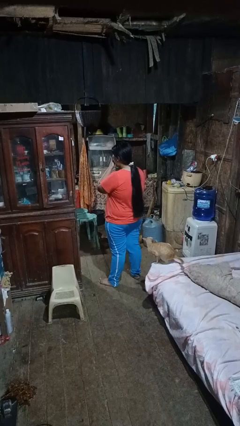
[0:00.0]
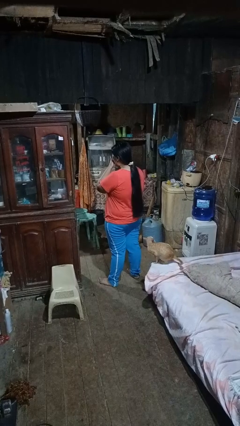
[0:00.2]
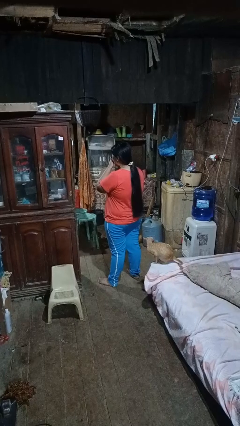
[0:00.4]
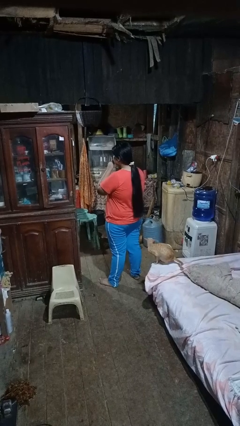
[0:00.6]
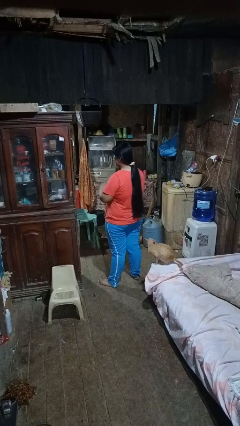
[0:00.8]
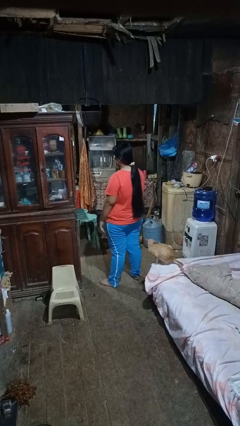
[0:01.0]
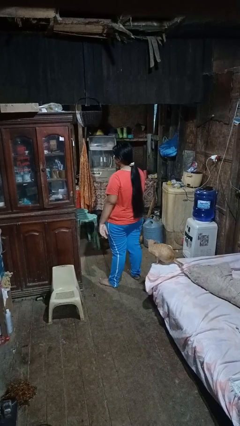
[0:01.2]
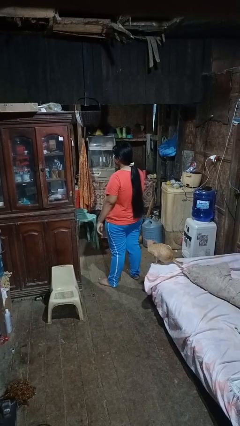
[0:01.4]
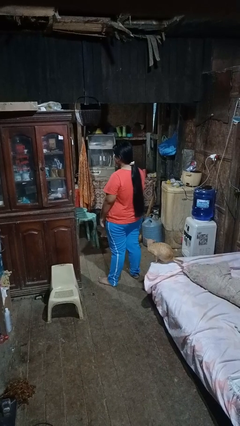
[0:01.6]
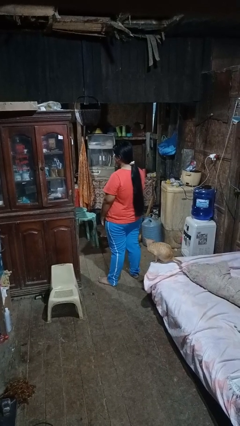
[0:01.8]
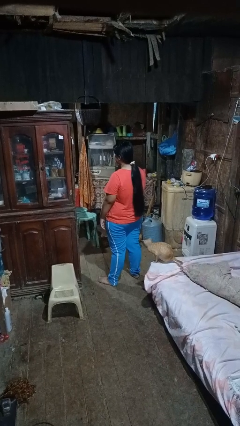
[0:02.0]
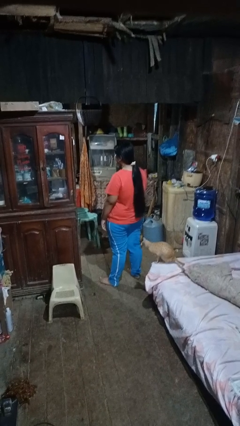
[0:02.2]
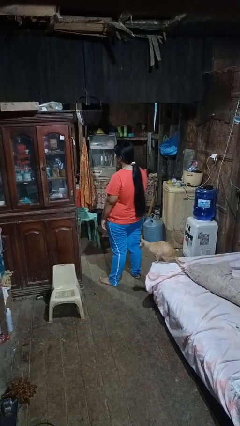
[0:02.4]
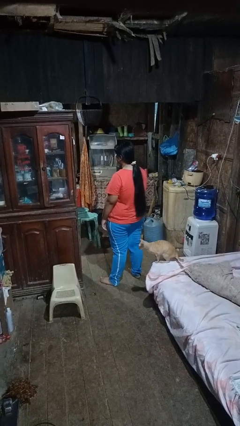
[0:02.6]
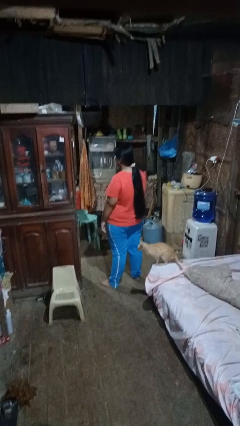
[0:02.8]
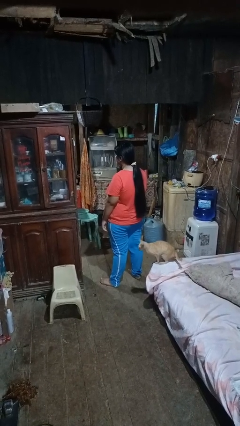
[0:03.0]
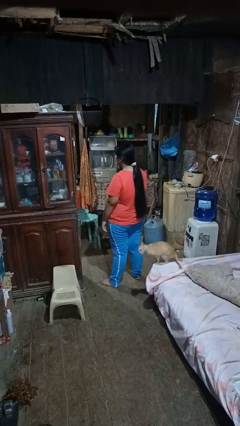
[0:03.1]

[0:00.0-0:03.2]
person yawns

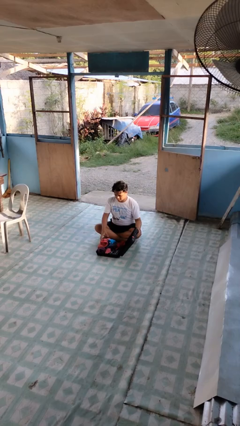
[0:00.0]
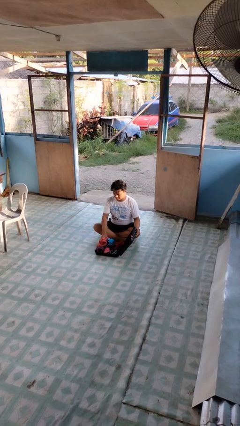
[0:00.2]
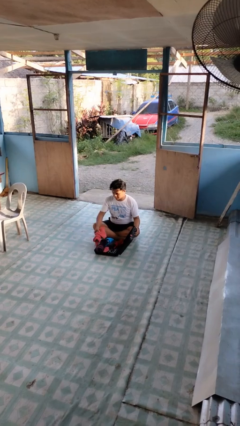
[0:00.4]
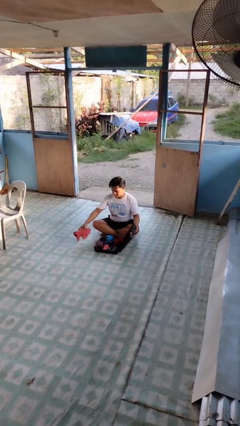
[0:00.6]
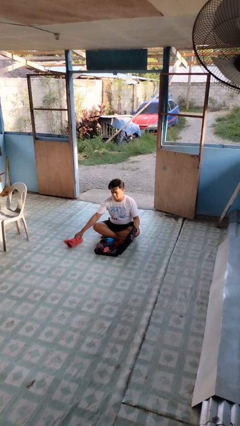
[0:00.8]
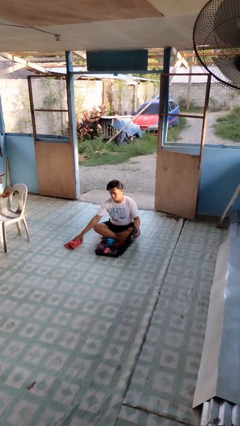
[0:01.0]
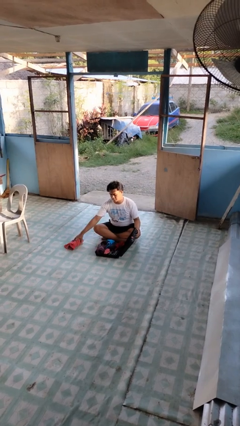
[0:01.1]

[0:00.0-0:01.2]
person unloads clothes from suitcase

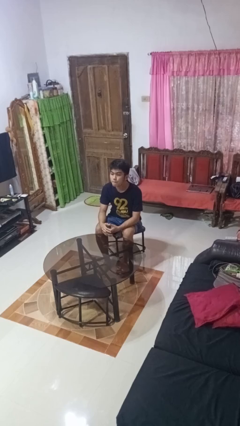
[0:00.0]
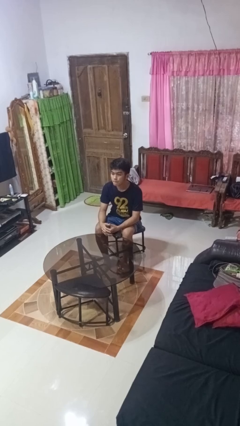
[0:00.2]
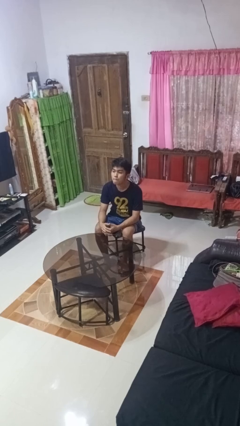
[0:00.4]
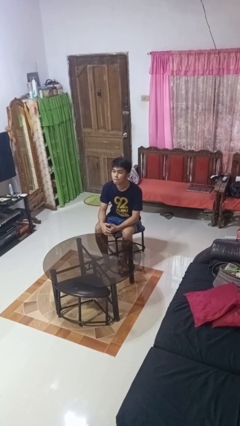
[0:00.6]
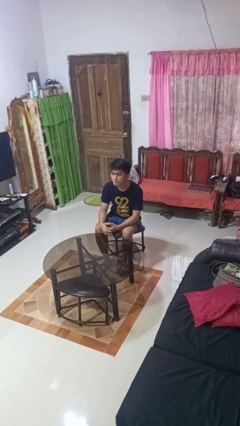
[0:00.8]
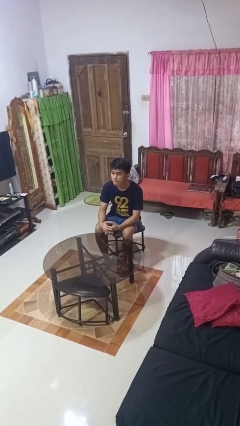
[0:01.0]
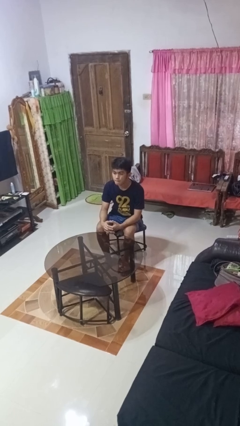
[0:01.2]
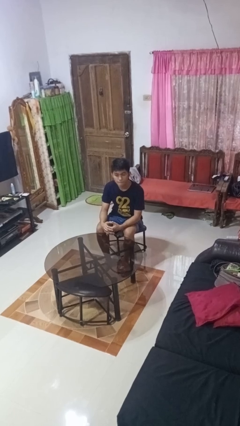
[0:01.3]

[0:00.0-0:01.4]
person nods head

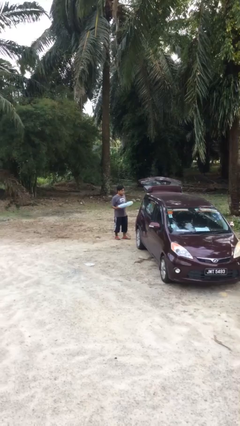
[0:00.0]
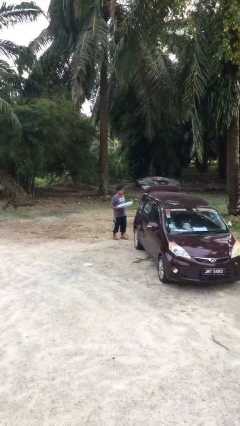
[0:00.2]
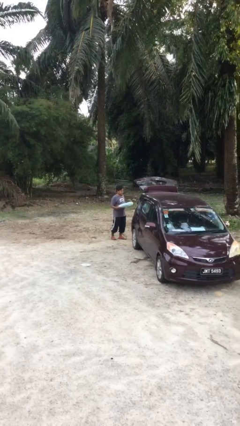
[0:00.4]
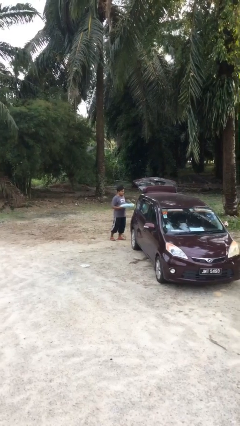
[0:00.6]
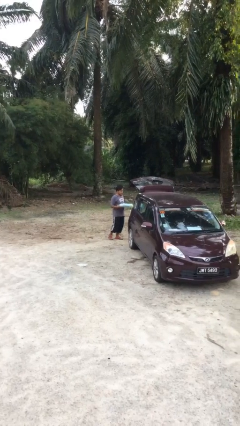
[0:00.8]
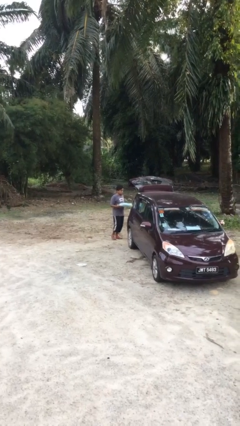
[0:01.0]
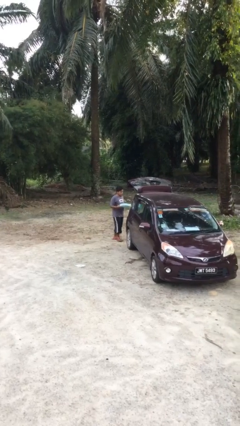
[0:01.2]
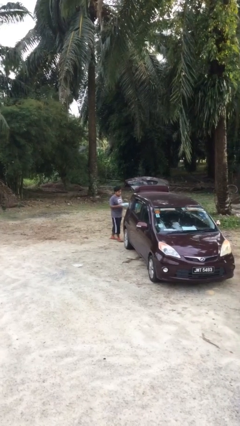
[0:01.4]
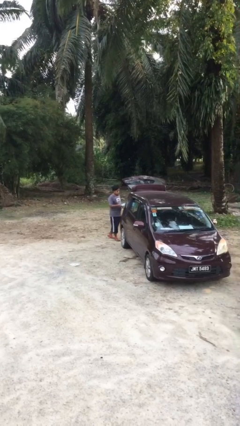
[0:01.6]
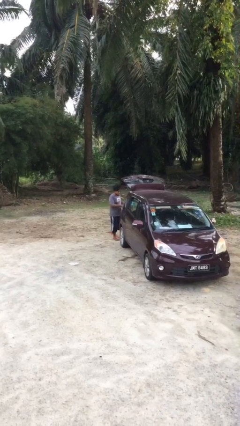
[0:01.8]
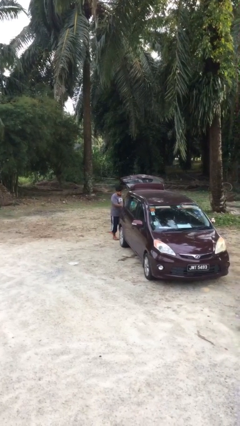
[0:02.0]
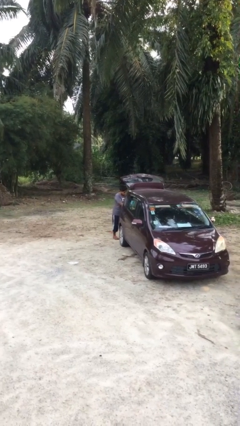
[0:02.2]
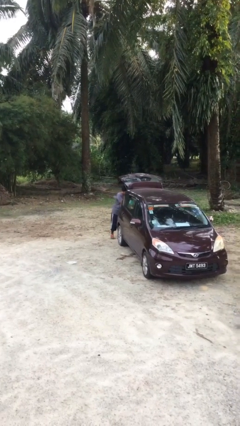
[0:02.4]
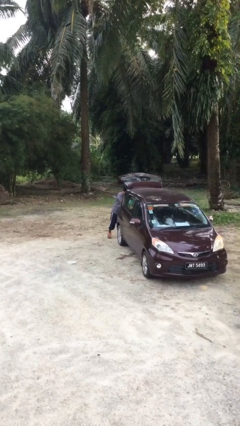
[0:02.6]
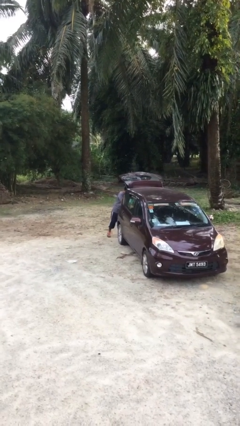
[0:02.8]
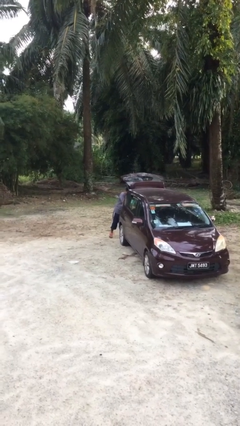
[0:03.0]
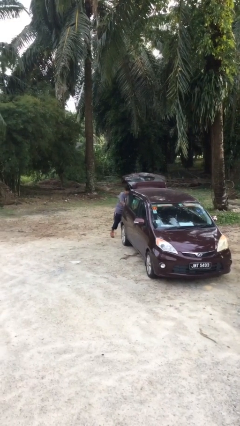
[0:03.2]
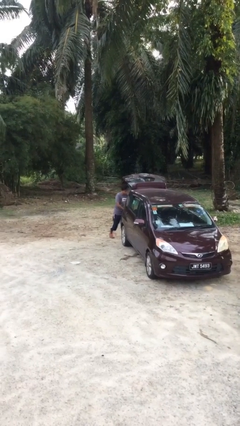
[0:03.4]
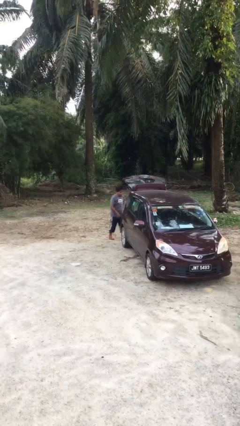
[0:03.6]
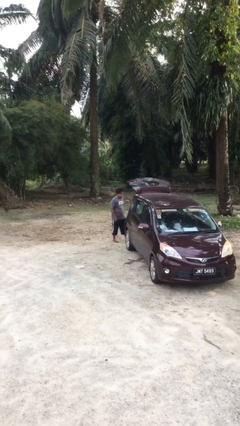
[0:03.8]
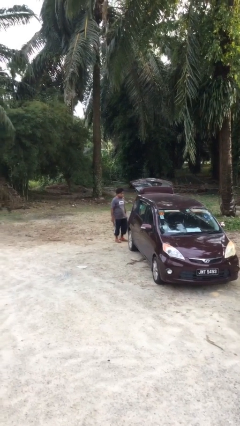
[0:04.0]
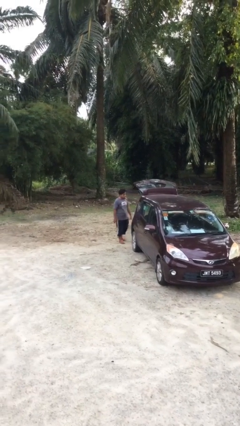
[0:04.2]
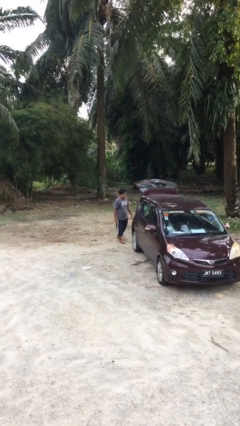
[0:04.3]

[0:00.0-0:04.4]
person loads car

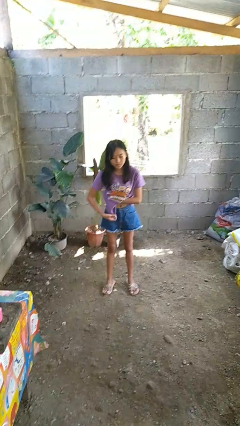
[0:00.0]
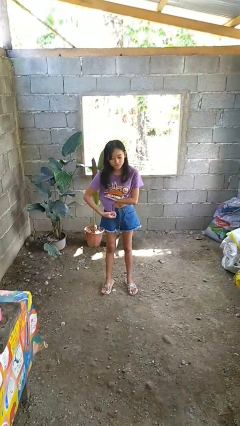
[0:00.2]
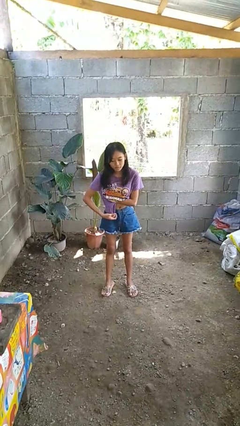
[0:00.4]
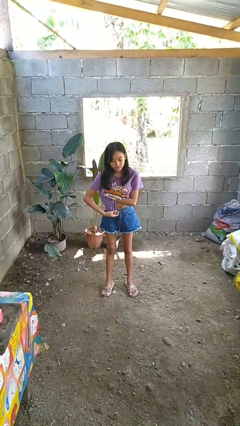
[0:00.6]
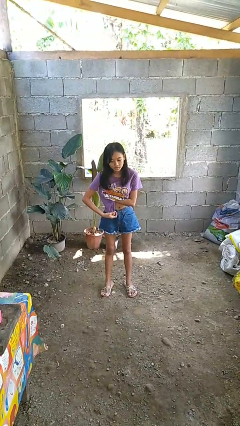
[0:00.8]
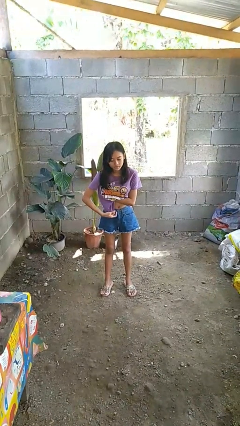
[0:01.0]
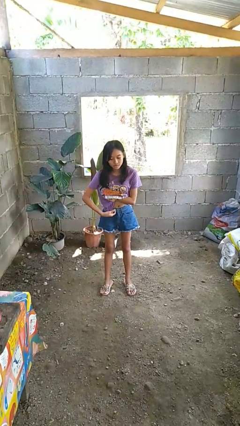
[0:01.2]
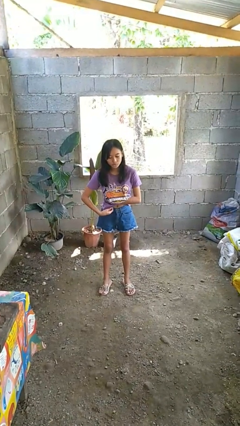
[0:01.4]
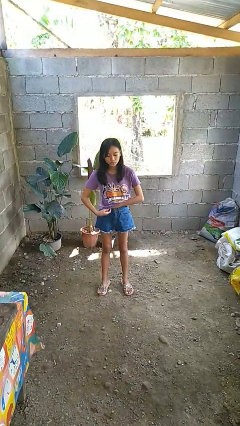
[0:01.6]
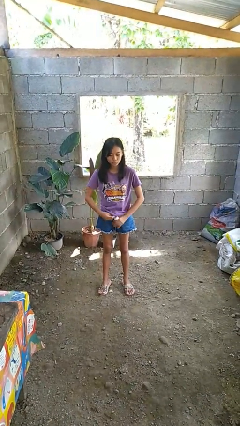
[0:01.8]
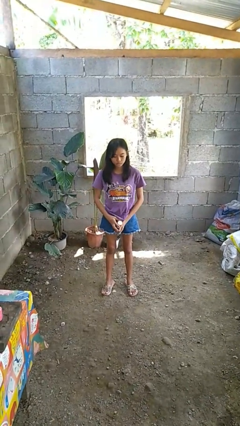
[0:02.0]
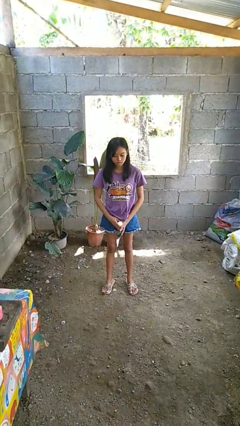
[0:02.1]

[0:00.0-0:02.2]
person applies deodorant

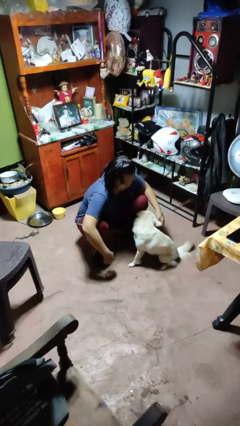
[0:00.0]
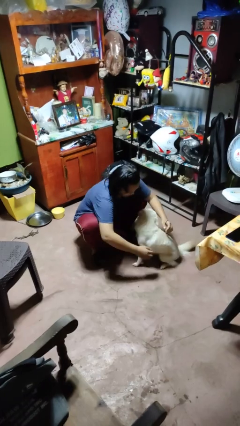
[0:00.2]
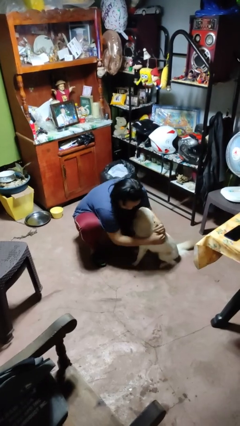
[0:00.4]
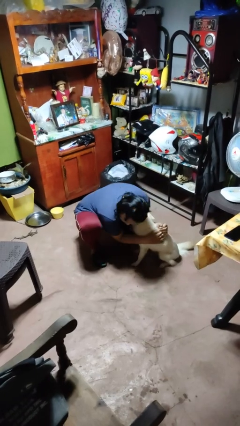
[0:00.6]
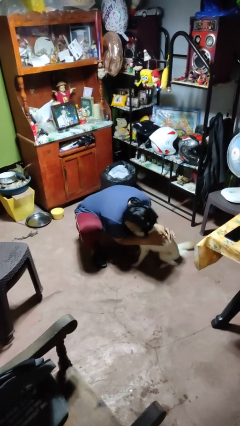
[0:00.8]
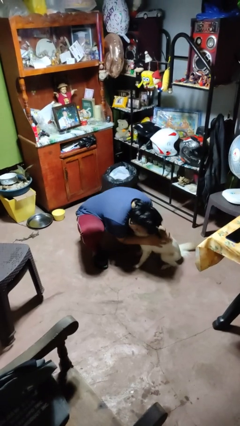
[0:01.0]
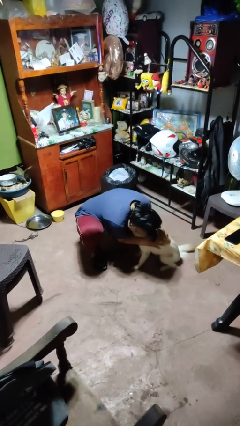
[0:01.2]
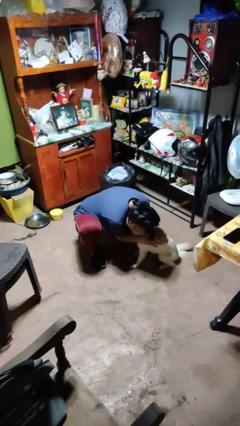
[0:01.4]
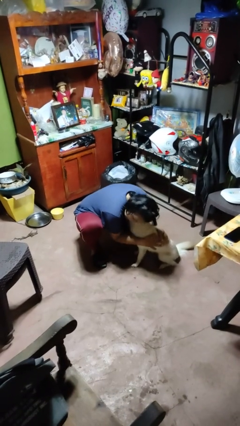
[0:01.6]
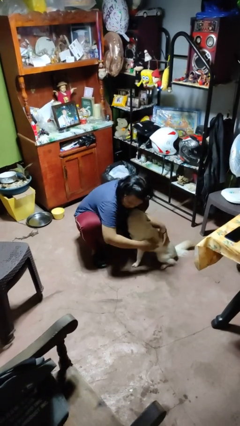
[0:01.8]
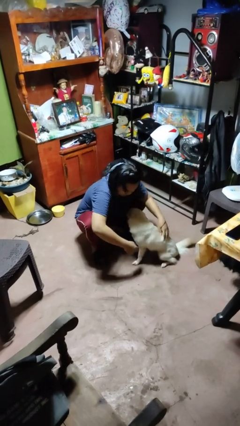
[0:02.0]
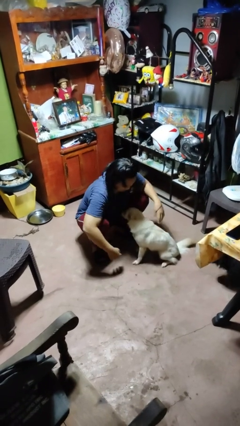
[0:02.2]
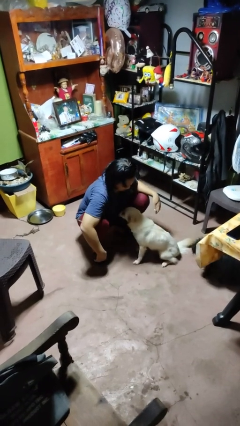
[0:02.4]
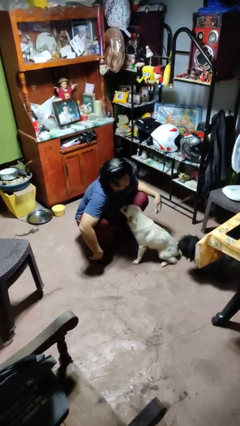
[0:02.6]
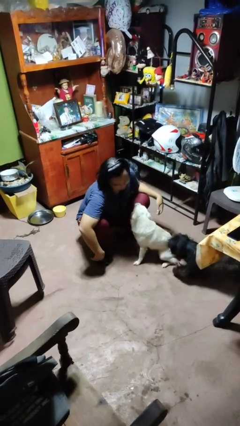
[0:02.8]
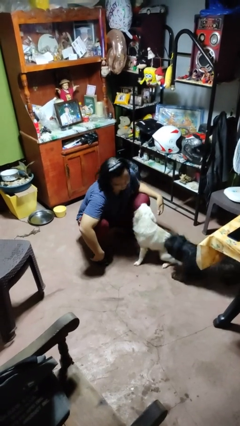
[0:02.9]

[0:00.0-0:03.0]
person hugs dog

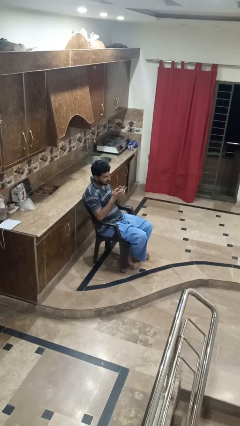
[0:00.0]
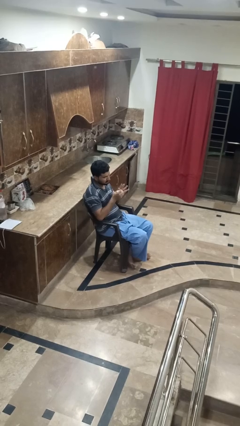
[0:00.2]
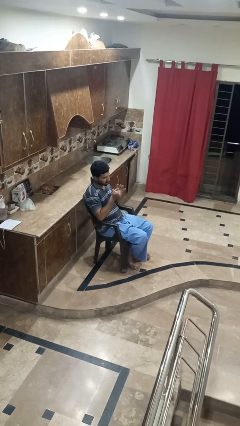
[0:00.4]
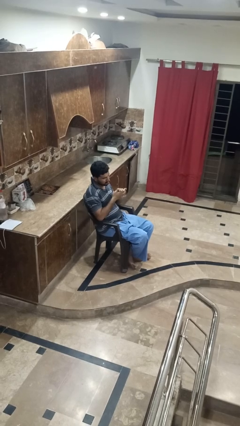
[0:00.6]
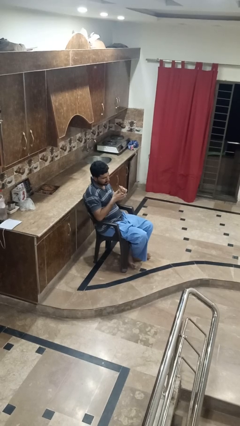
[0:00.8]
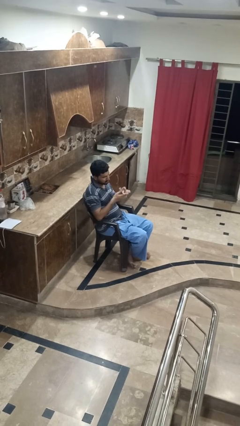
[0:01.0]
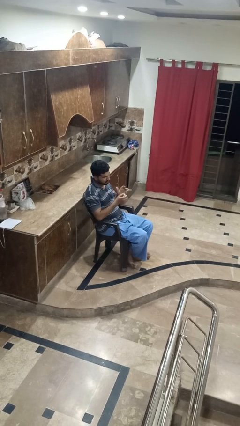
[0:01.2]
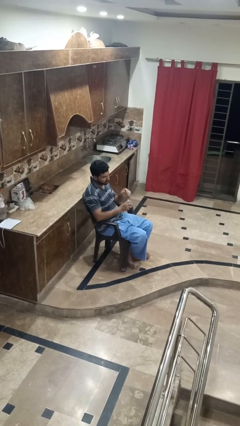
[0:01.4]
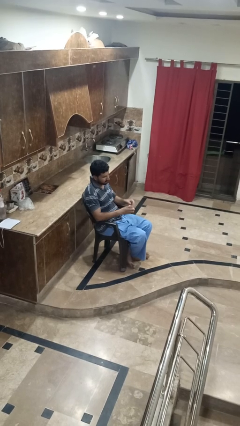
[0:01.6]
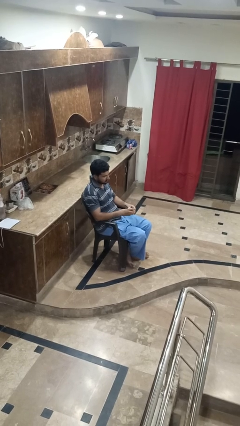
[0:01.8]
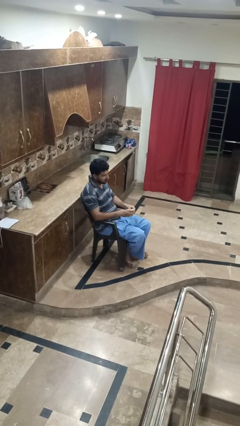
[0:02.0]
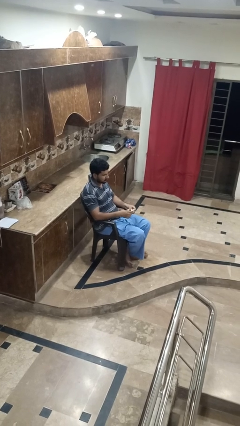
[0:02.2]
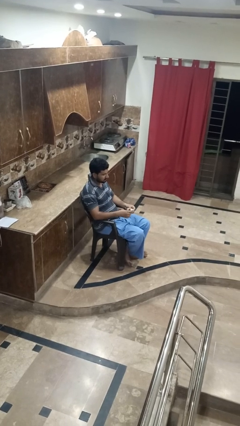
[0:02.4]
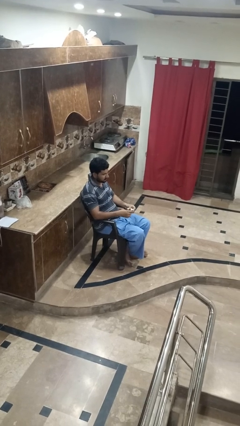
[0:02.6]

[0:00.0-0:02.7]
person crumples paper
